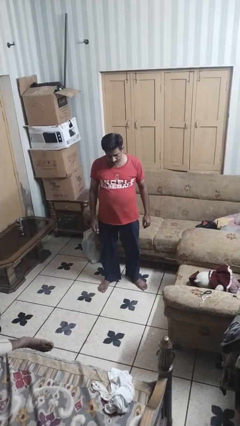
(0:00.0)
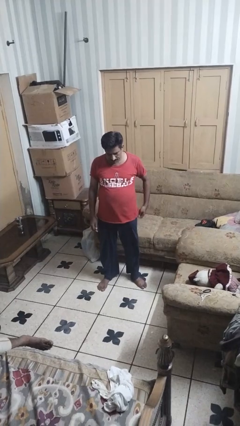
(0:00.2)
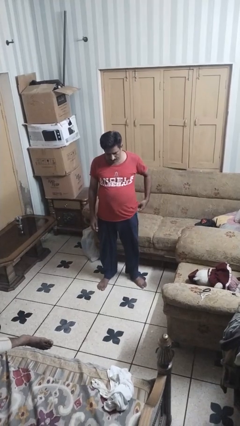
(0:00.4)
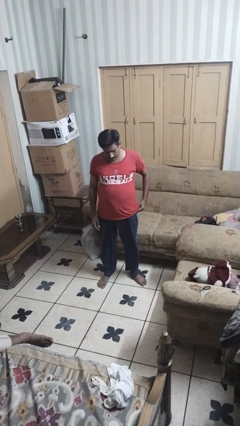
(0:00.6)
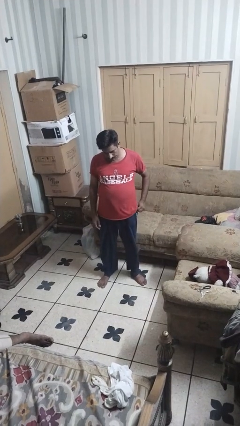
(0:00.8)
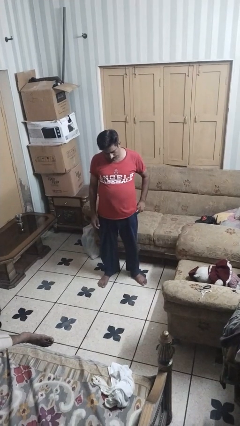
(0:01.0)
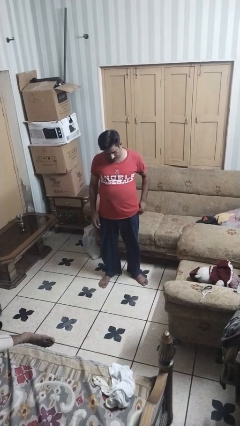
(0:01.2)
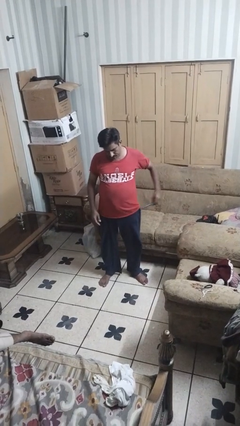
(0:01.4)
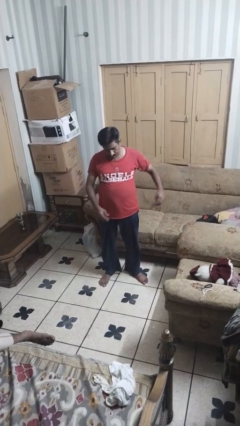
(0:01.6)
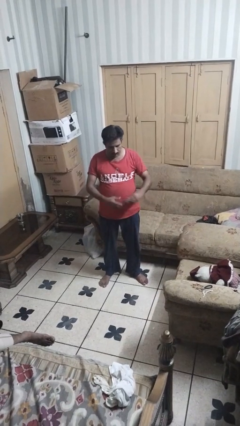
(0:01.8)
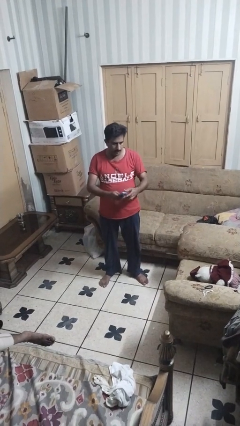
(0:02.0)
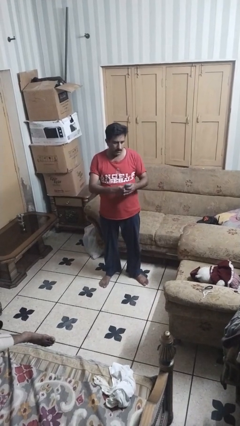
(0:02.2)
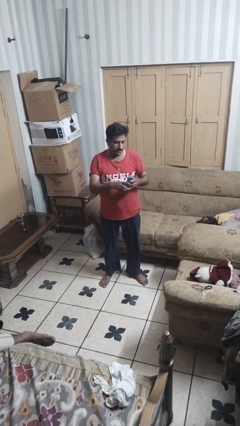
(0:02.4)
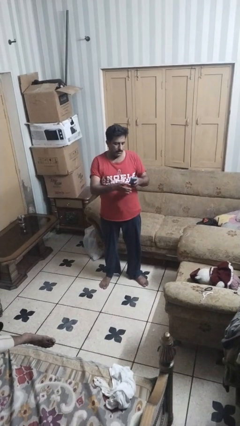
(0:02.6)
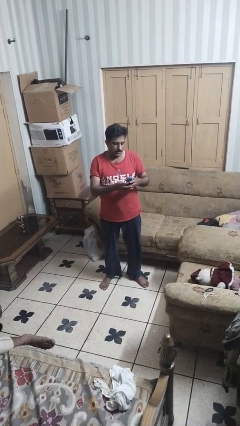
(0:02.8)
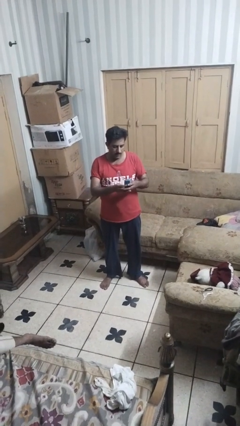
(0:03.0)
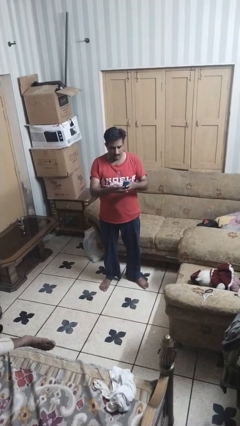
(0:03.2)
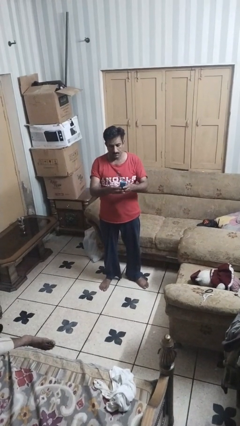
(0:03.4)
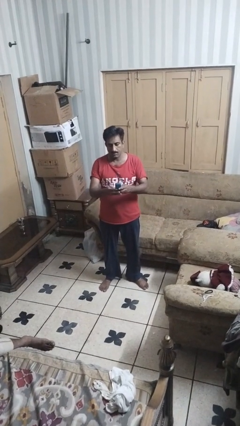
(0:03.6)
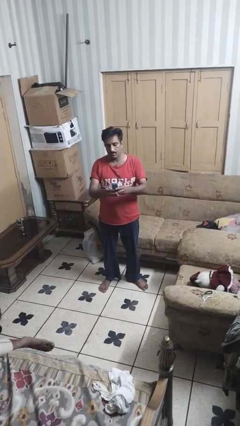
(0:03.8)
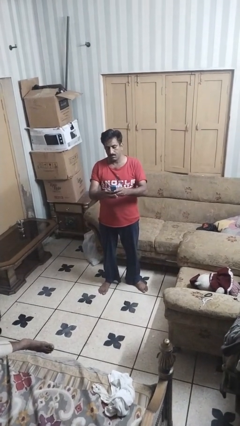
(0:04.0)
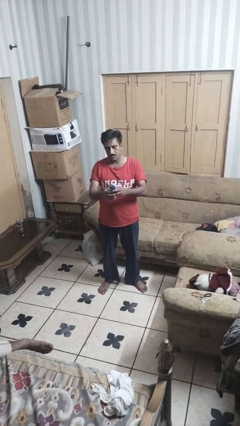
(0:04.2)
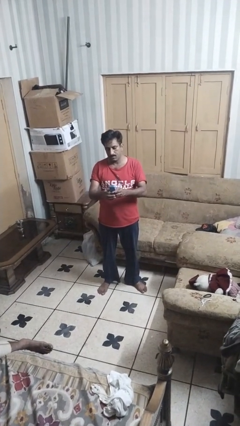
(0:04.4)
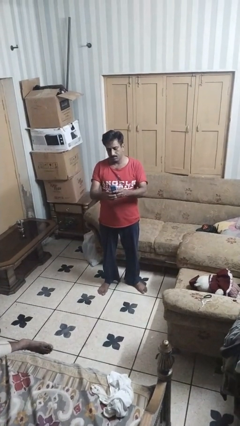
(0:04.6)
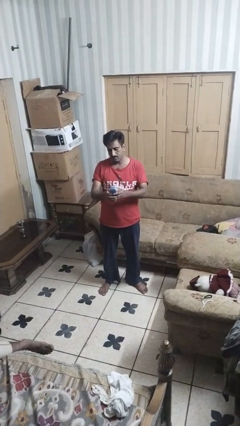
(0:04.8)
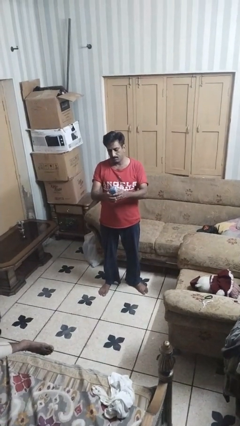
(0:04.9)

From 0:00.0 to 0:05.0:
person takes phone from pocket

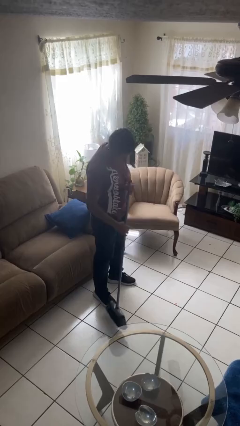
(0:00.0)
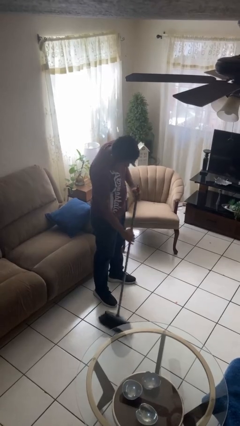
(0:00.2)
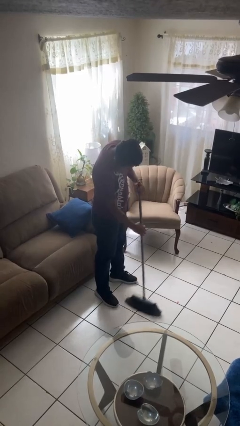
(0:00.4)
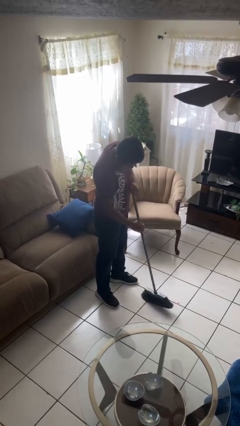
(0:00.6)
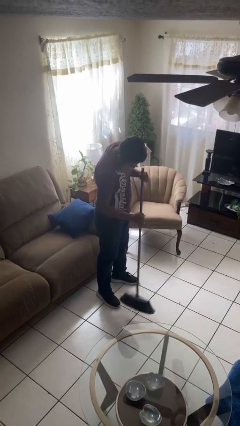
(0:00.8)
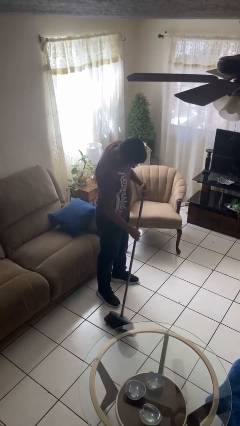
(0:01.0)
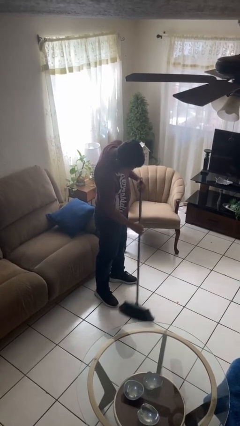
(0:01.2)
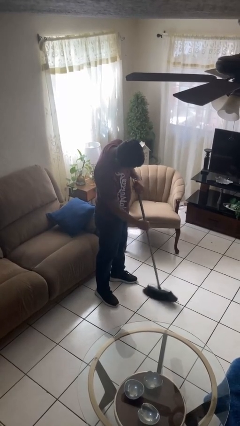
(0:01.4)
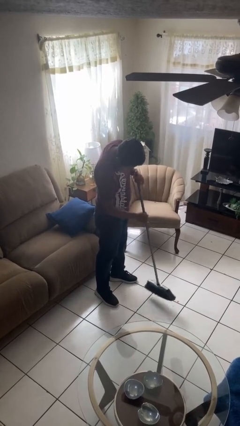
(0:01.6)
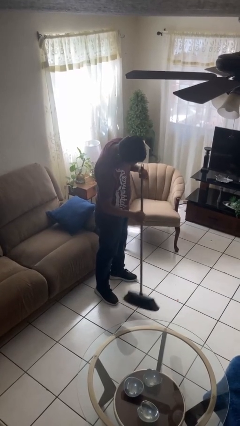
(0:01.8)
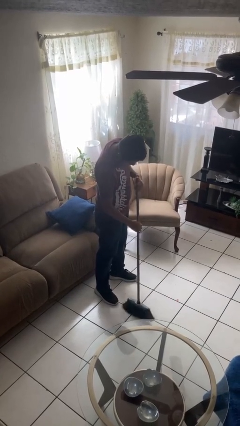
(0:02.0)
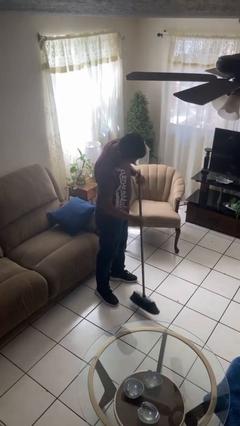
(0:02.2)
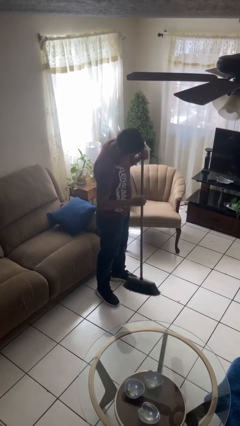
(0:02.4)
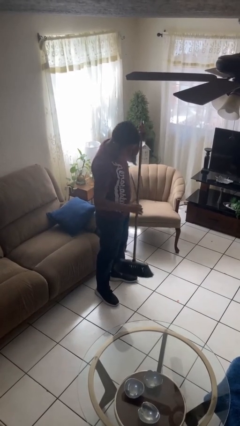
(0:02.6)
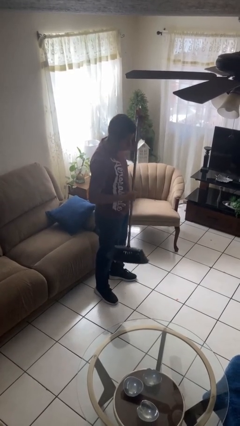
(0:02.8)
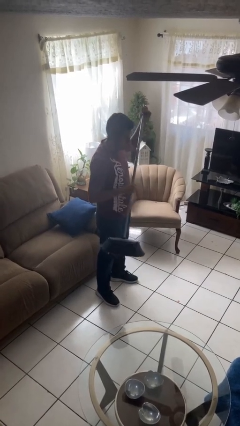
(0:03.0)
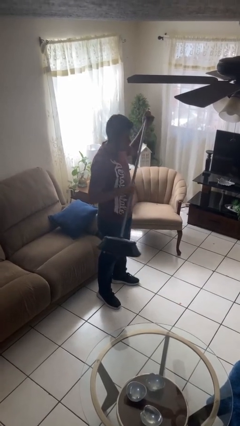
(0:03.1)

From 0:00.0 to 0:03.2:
person sweeps floor

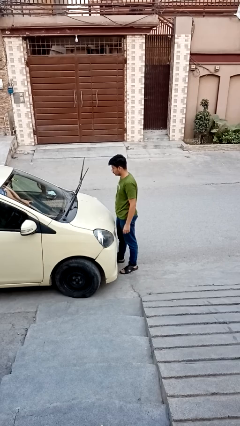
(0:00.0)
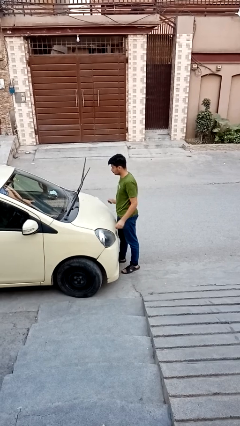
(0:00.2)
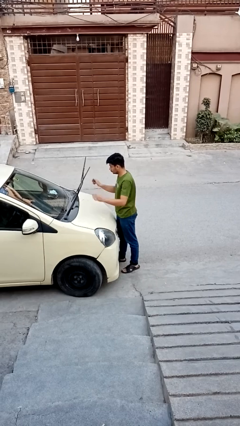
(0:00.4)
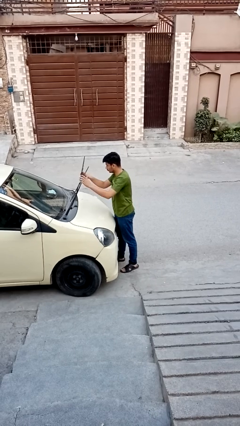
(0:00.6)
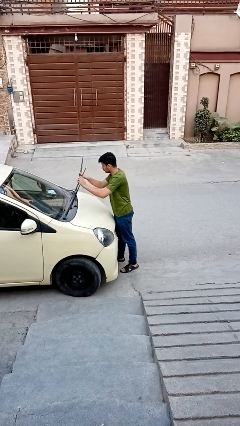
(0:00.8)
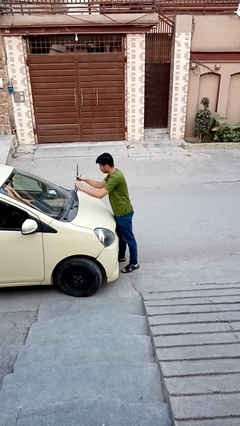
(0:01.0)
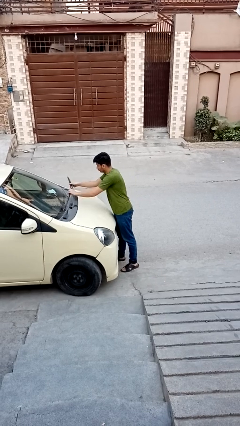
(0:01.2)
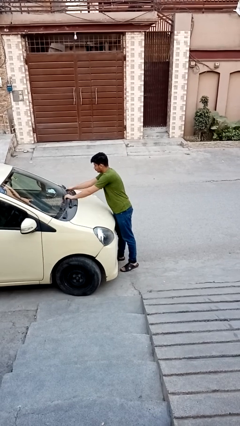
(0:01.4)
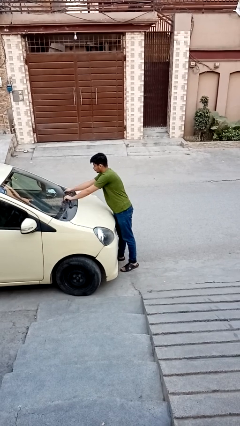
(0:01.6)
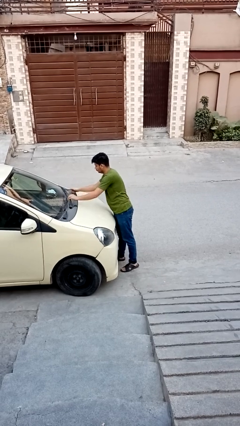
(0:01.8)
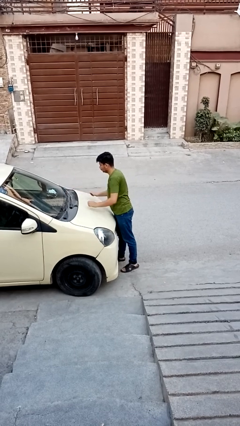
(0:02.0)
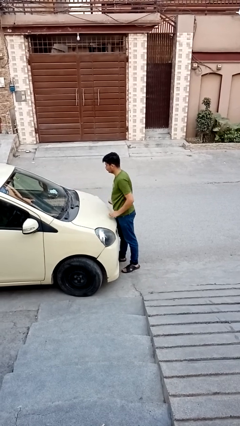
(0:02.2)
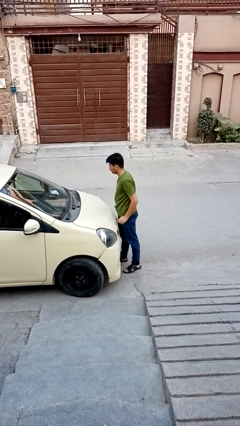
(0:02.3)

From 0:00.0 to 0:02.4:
person flips down car wipers

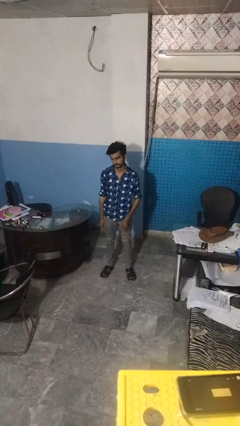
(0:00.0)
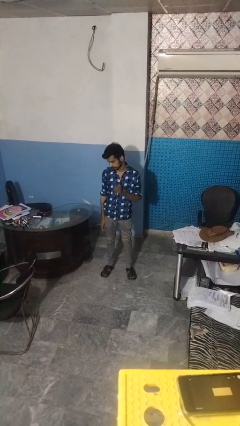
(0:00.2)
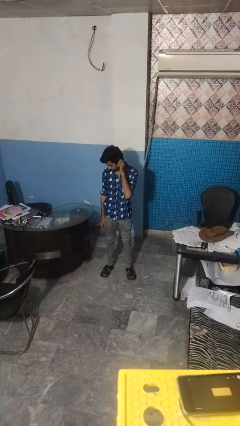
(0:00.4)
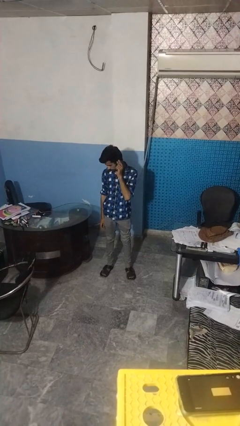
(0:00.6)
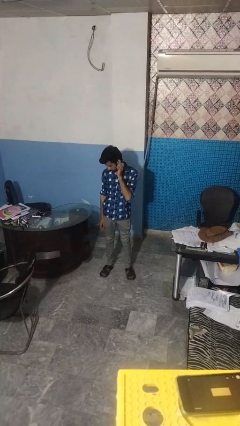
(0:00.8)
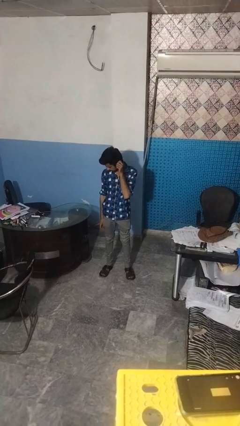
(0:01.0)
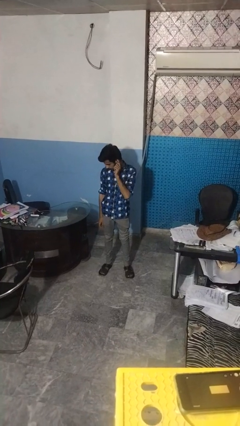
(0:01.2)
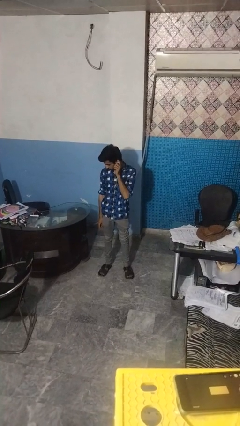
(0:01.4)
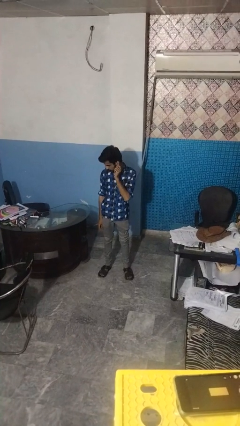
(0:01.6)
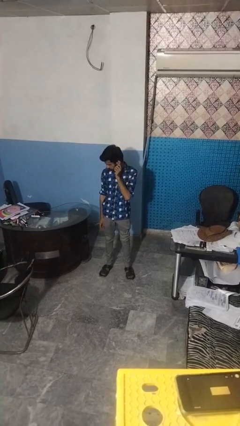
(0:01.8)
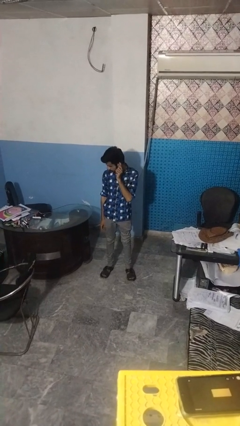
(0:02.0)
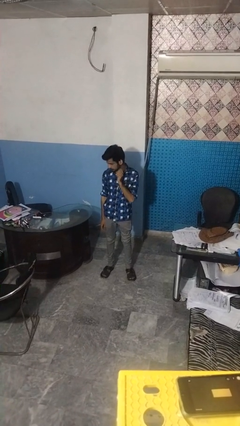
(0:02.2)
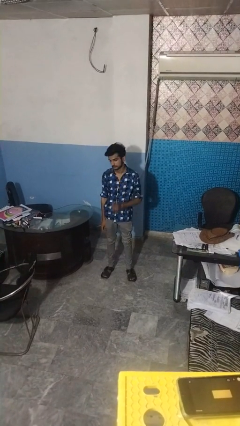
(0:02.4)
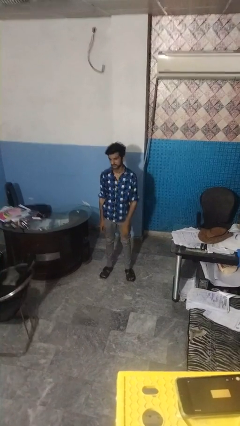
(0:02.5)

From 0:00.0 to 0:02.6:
person touches earlobe

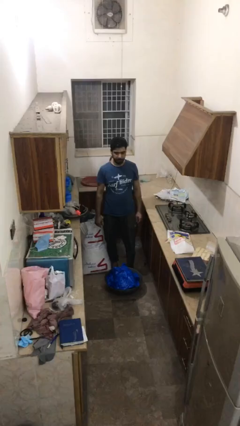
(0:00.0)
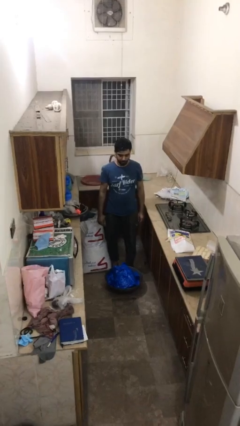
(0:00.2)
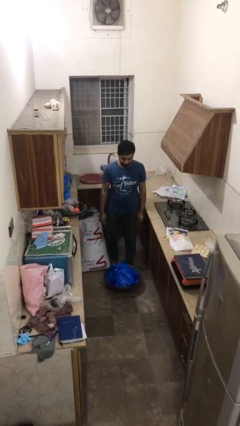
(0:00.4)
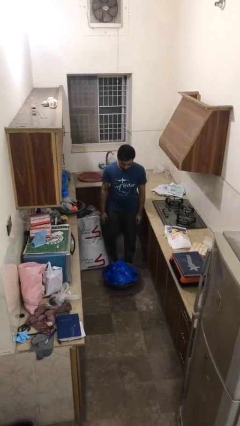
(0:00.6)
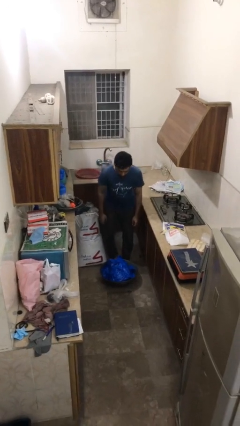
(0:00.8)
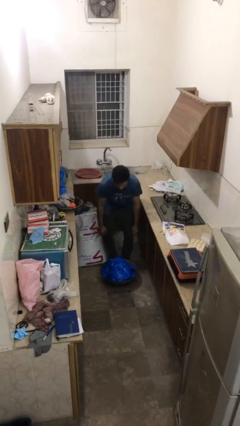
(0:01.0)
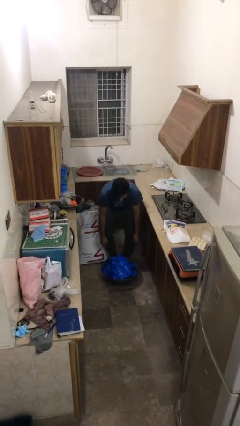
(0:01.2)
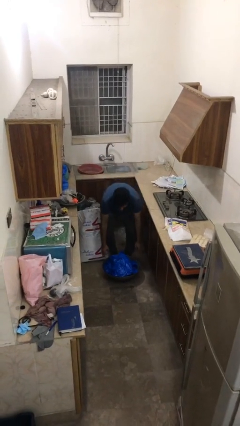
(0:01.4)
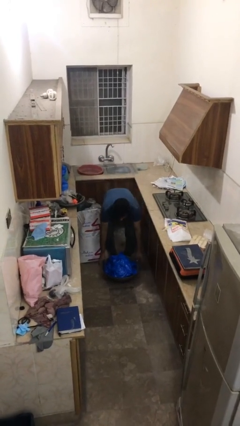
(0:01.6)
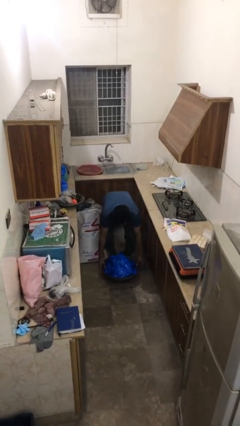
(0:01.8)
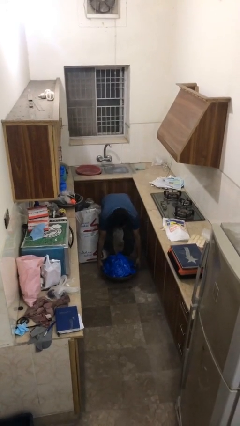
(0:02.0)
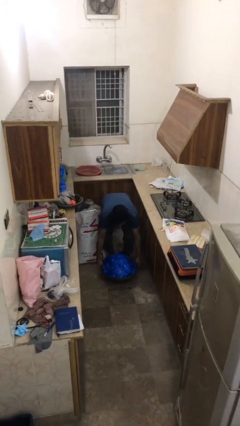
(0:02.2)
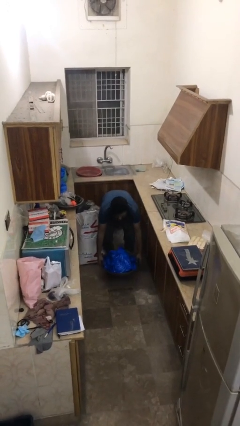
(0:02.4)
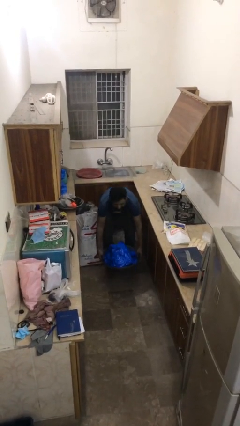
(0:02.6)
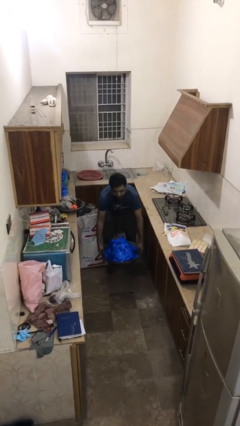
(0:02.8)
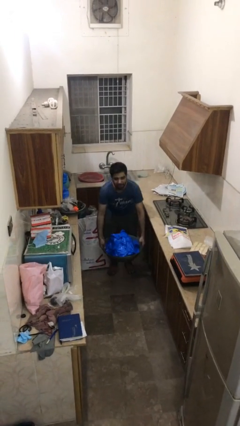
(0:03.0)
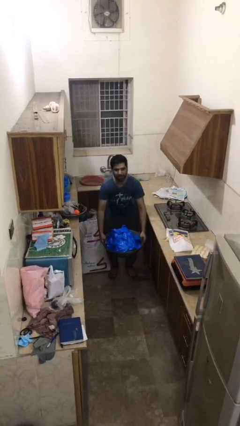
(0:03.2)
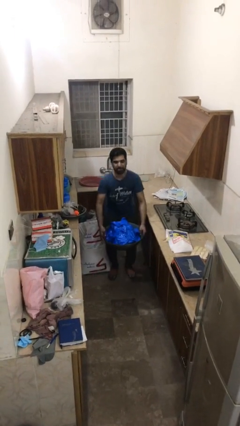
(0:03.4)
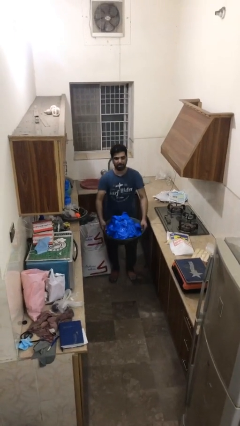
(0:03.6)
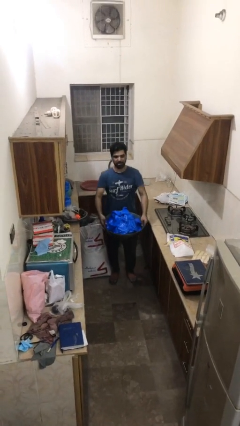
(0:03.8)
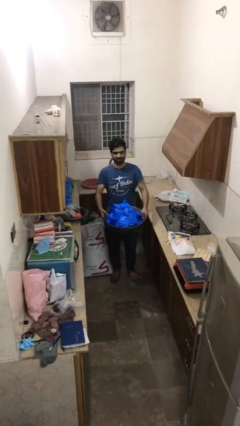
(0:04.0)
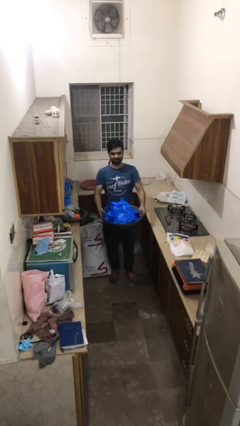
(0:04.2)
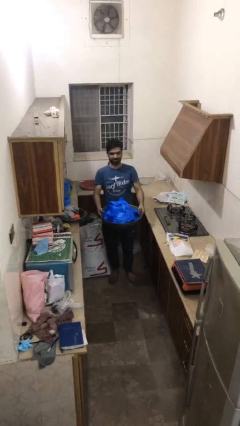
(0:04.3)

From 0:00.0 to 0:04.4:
person picks up object from floor
